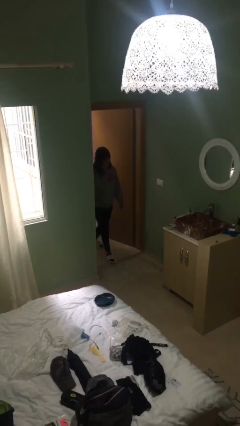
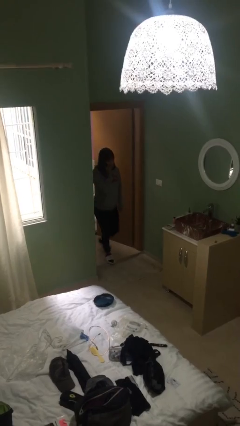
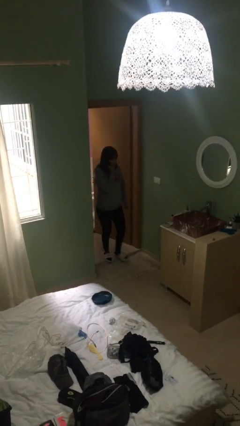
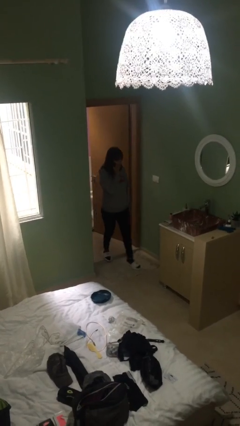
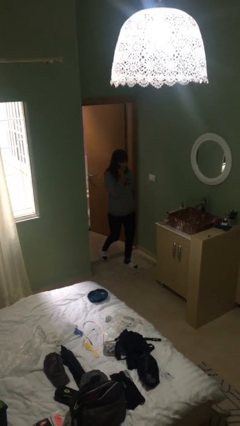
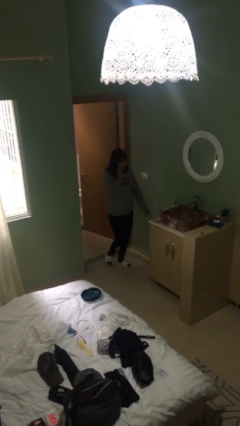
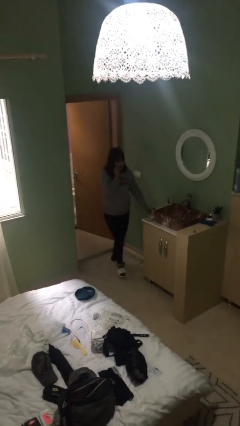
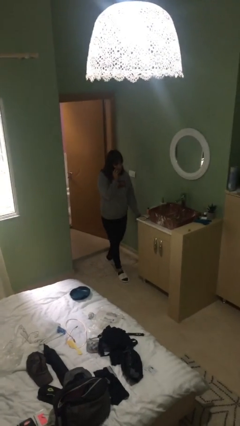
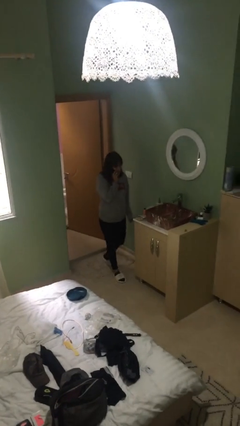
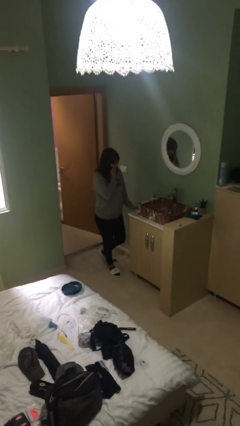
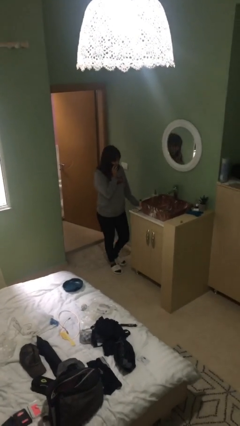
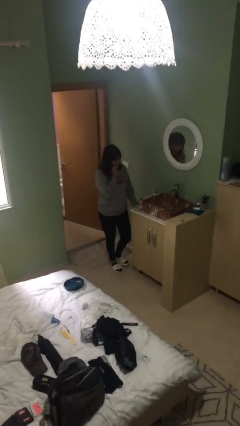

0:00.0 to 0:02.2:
person enters scene through structure

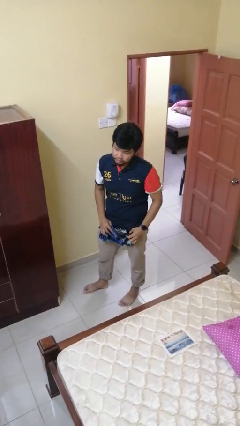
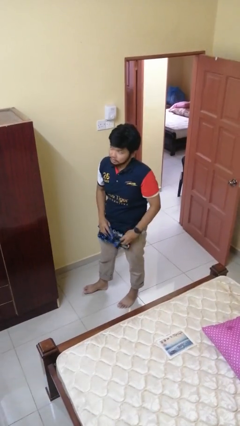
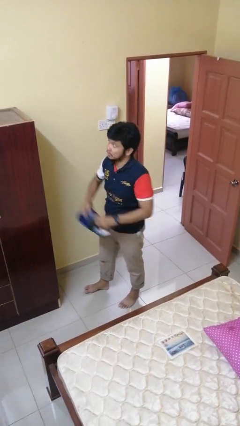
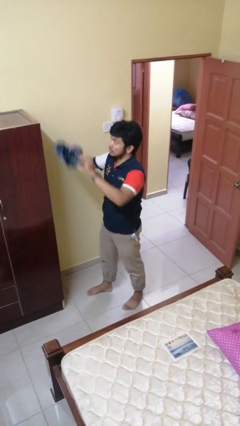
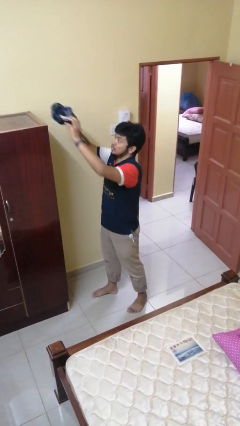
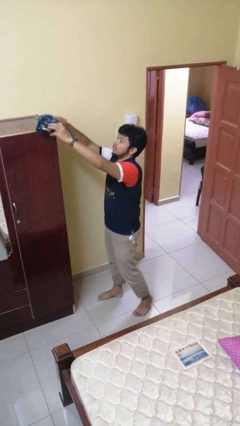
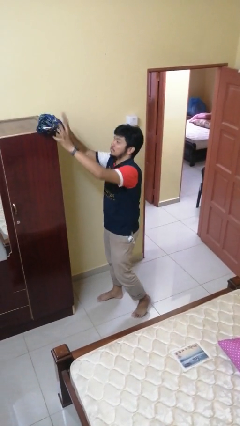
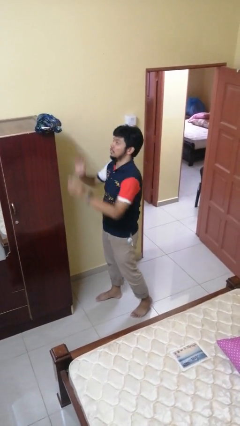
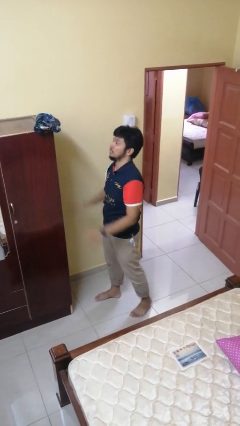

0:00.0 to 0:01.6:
person puts down object on countertop

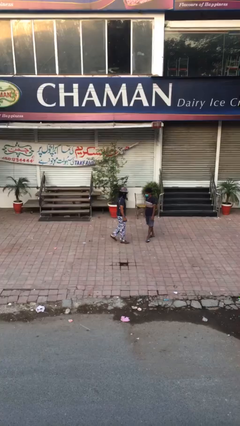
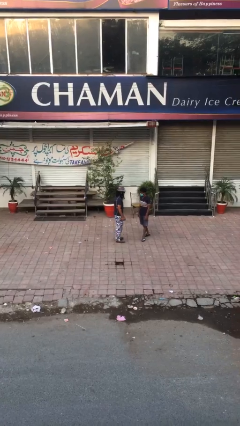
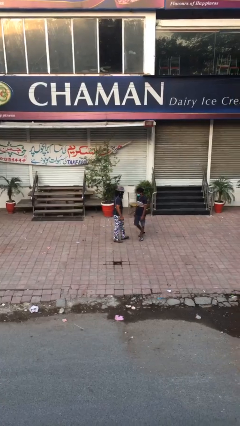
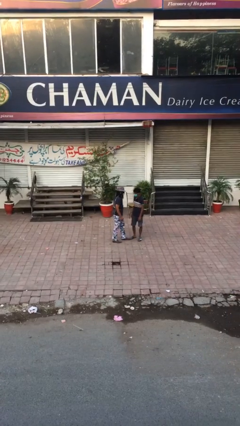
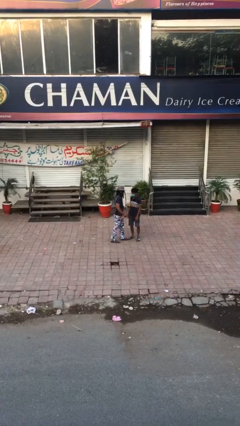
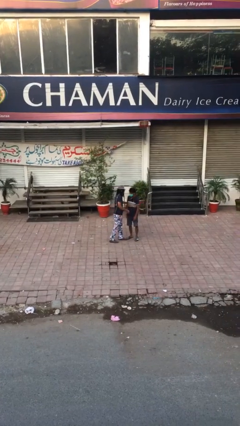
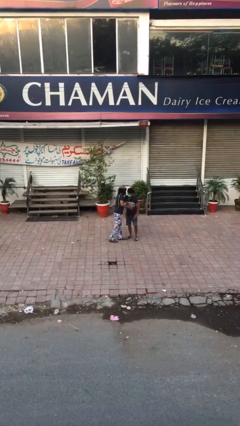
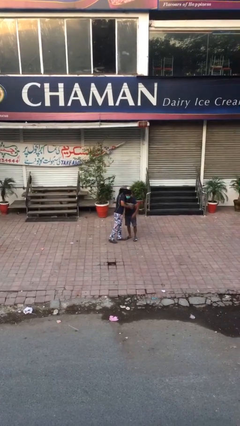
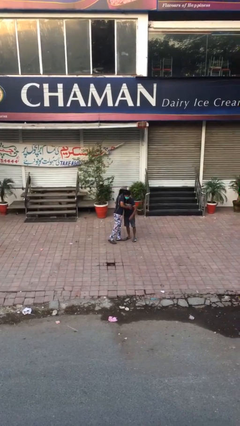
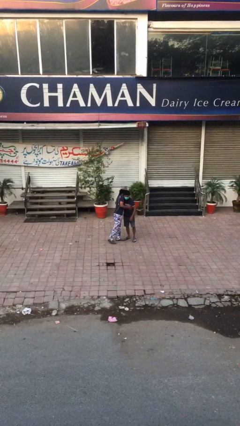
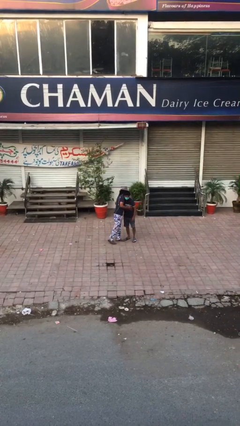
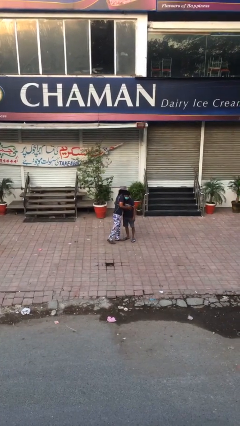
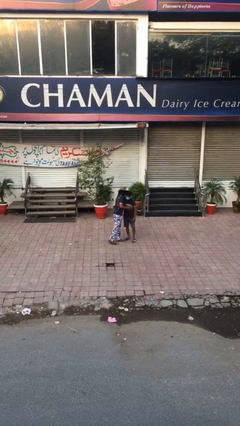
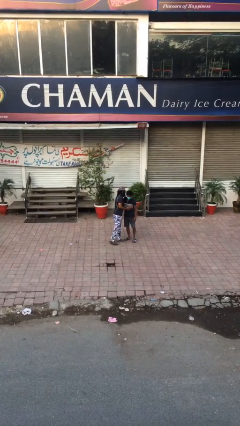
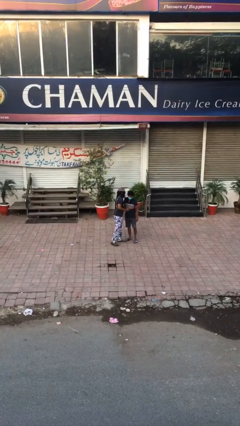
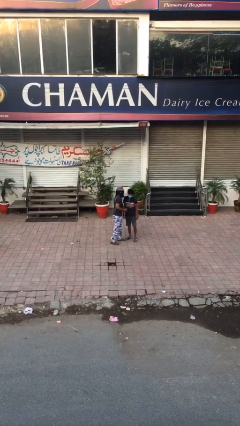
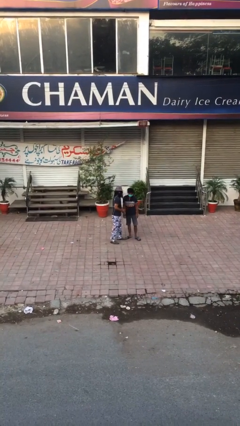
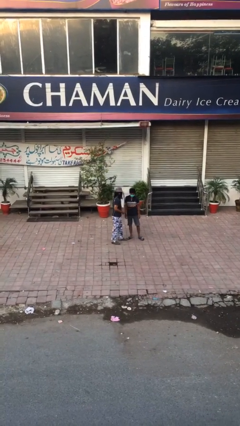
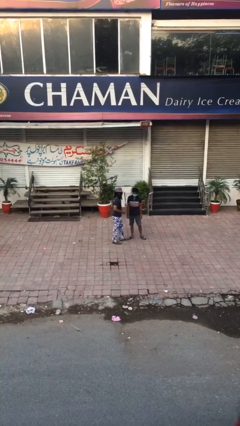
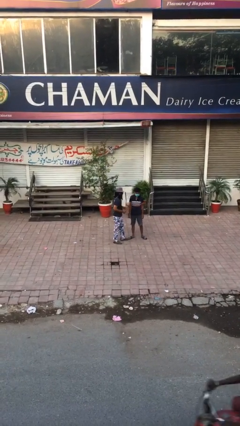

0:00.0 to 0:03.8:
person embraces person

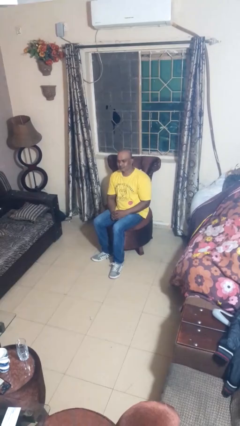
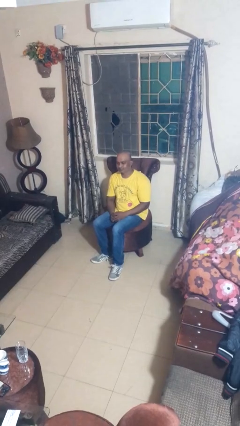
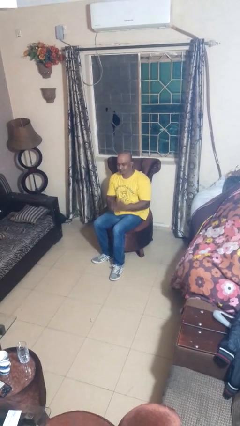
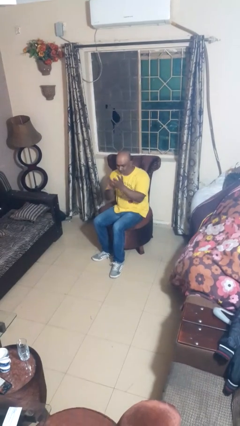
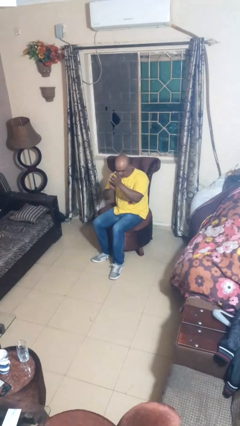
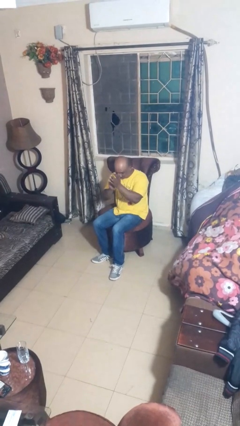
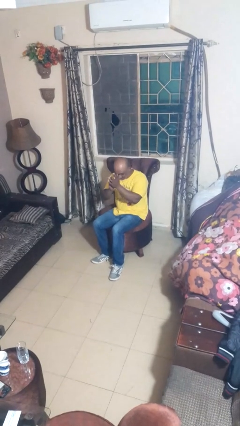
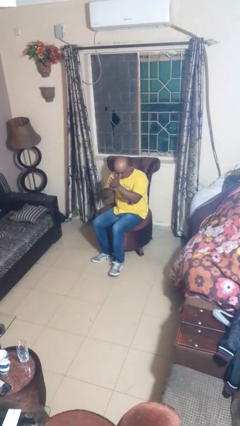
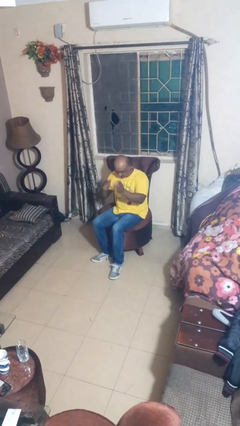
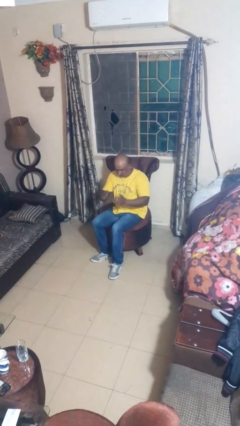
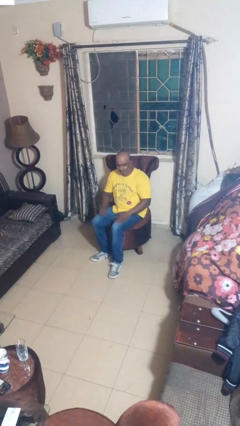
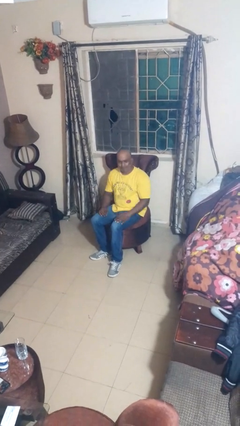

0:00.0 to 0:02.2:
person claps hands

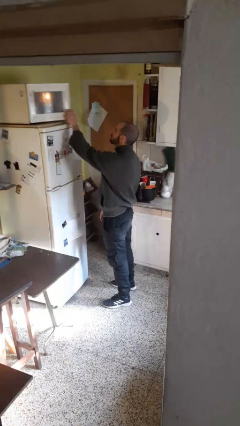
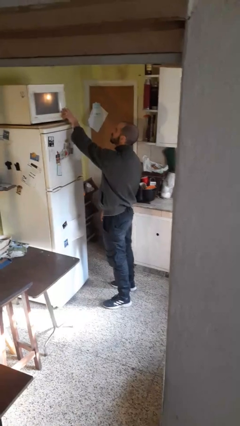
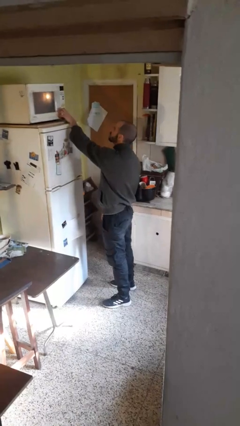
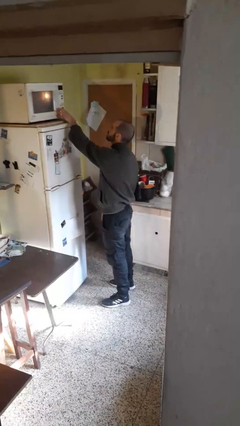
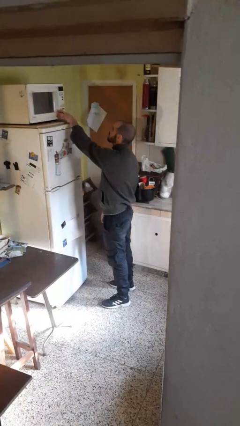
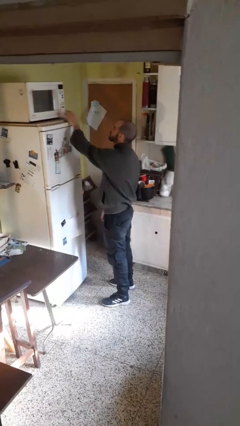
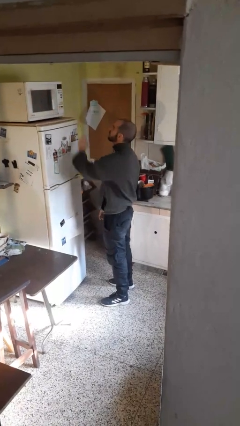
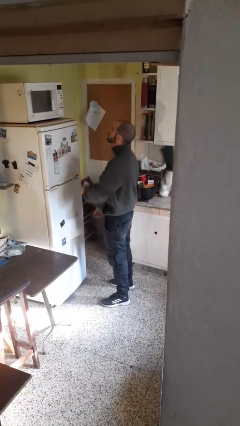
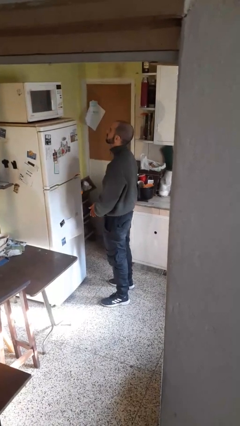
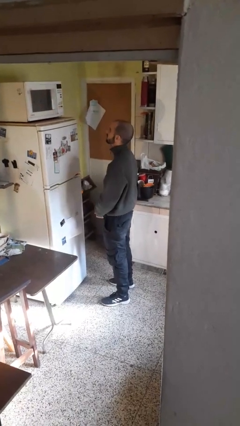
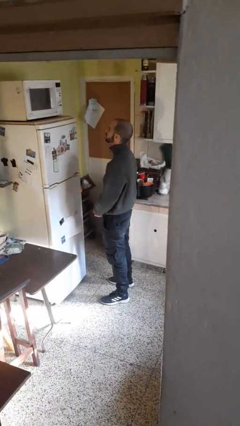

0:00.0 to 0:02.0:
person closes microwave

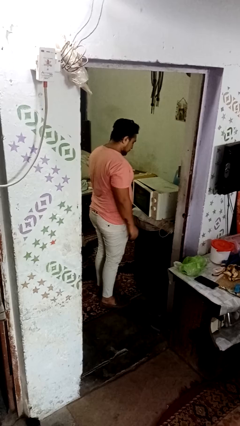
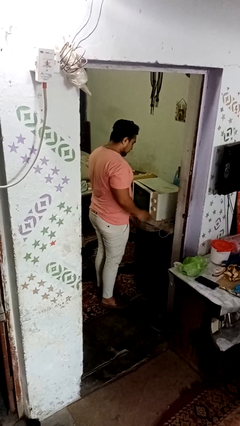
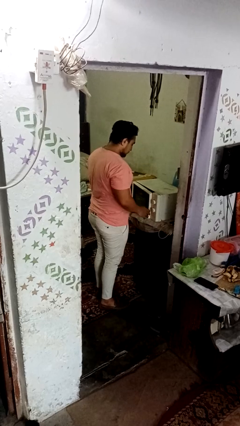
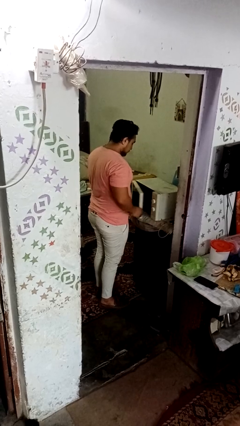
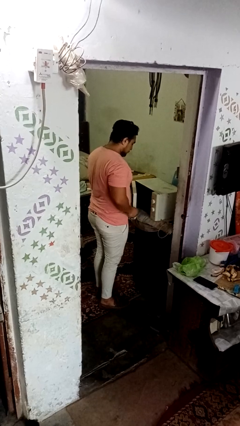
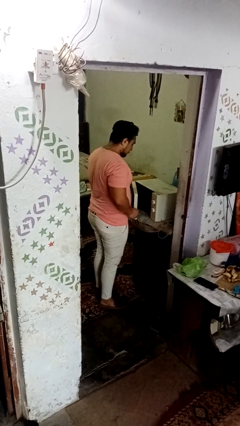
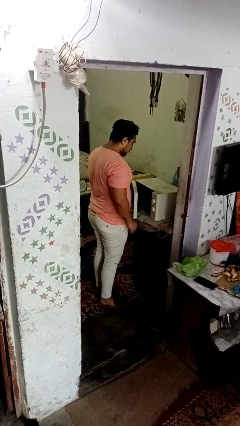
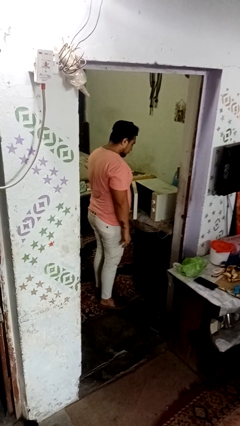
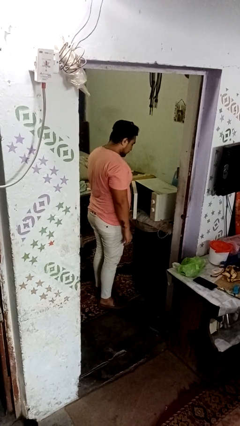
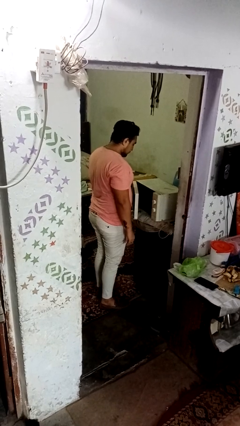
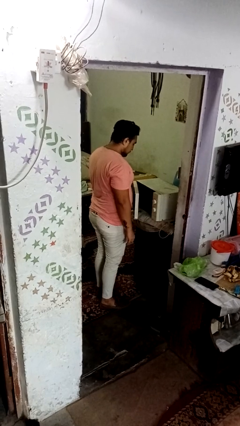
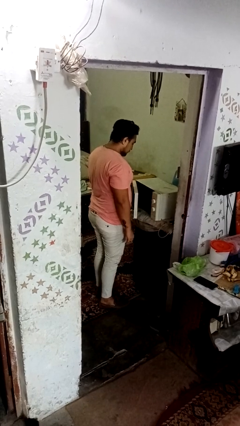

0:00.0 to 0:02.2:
person opens dishwasher

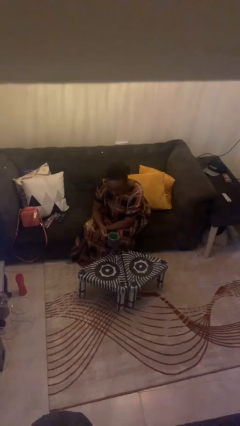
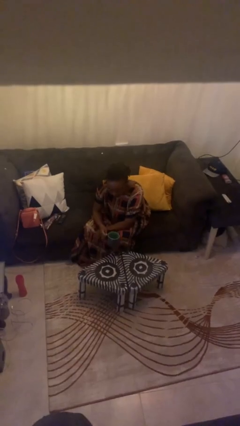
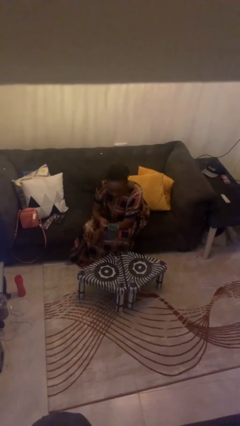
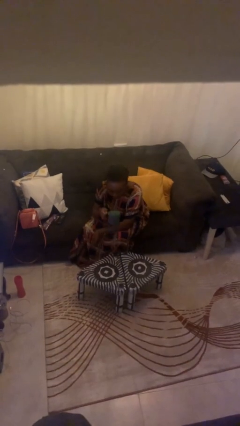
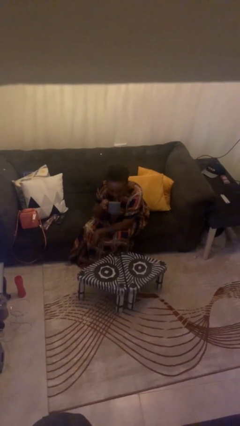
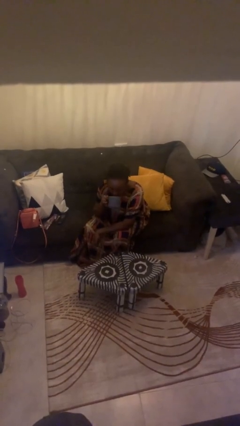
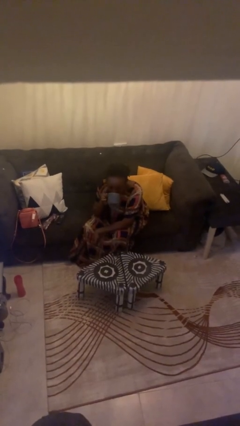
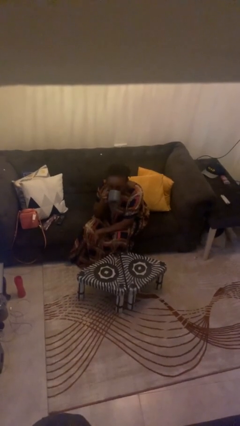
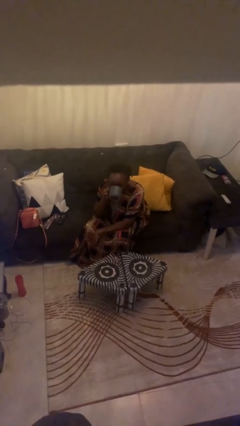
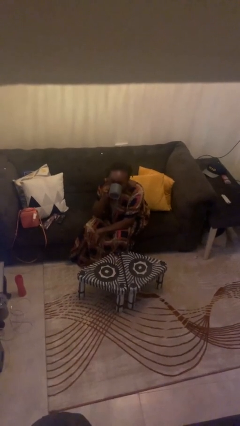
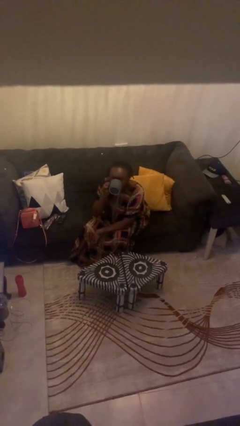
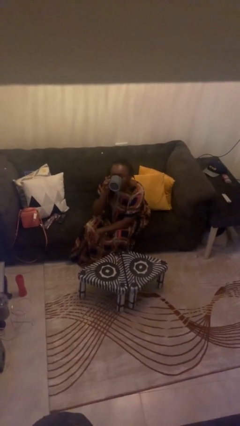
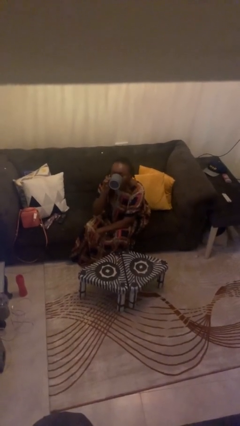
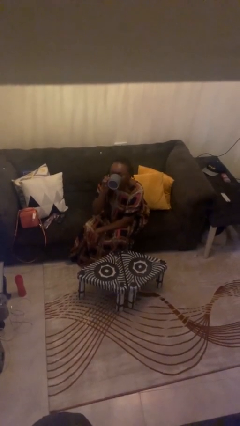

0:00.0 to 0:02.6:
person drinks from mug
